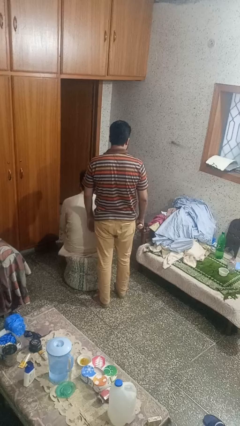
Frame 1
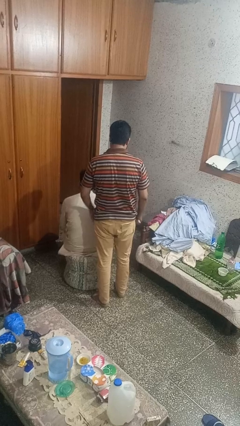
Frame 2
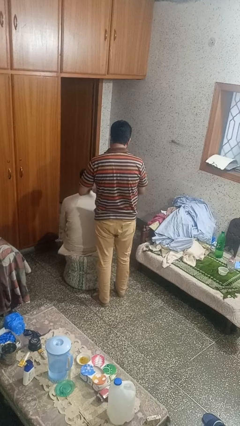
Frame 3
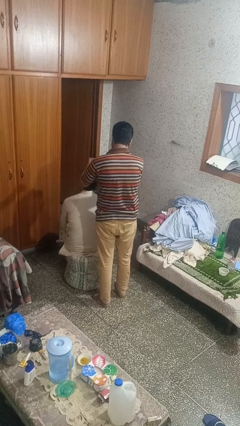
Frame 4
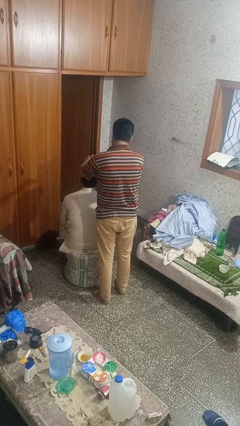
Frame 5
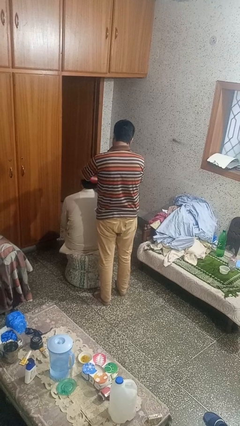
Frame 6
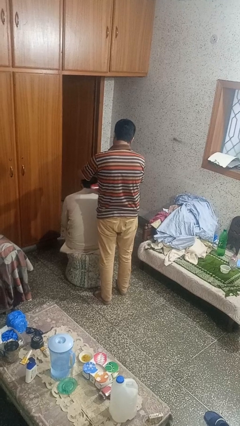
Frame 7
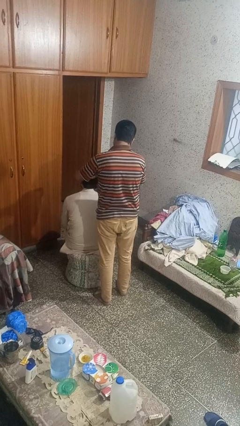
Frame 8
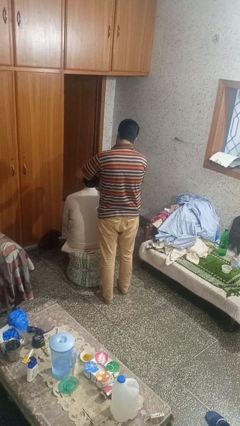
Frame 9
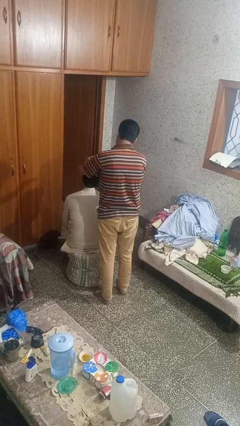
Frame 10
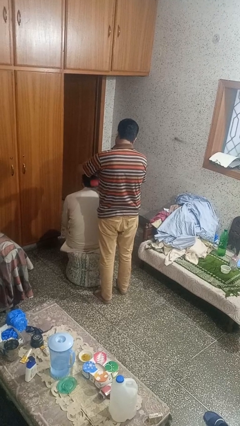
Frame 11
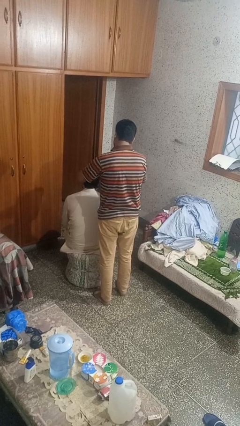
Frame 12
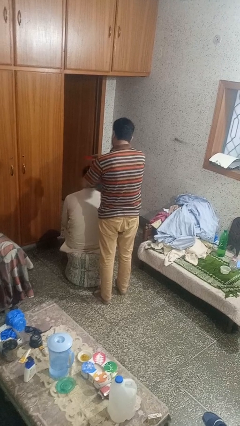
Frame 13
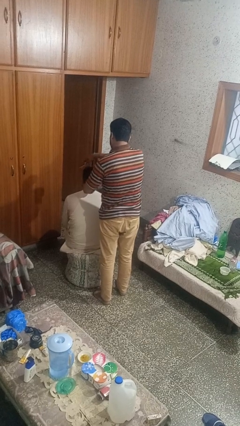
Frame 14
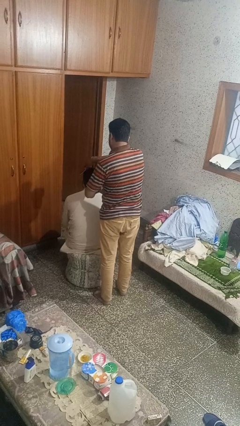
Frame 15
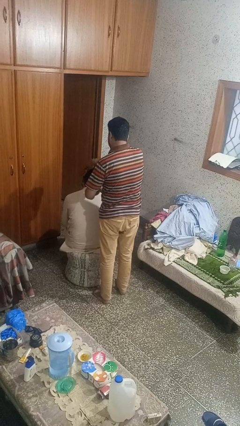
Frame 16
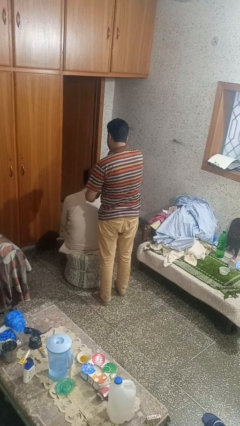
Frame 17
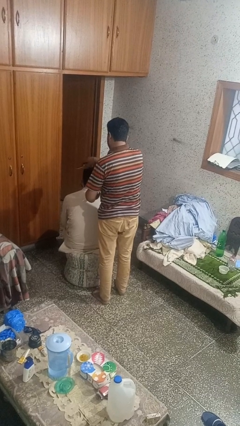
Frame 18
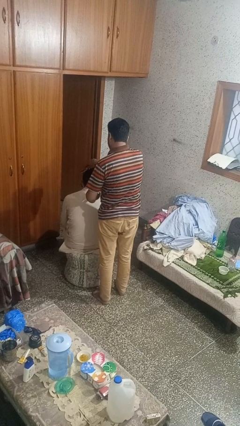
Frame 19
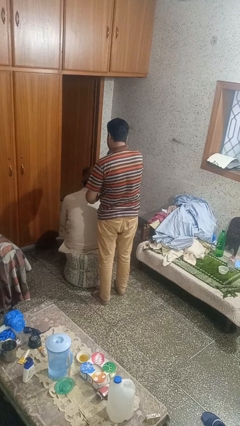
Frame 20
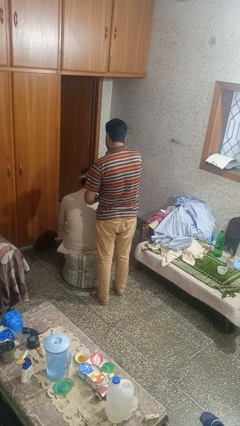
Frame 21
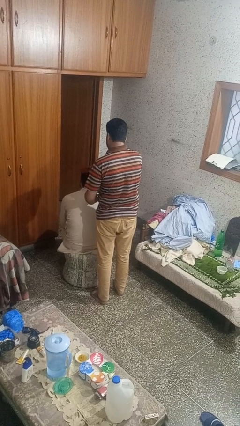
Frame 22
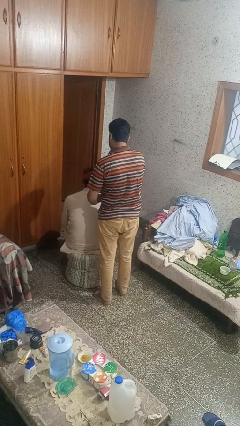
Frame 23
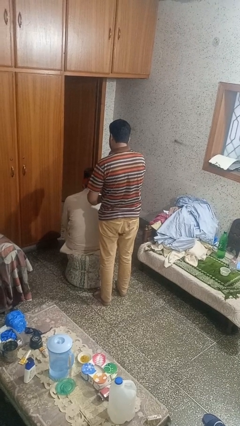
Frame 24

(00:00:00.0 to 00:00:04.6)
person brushes hair of person

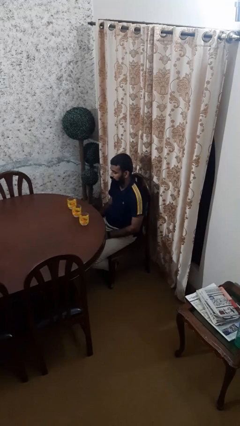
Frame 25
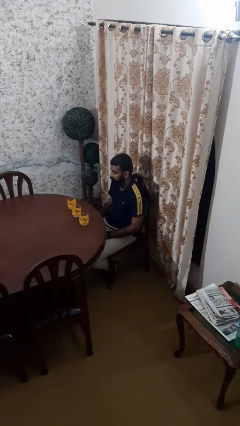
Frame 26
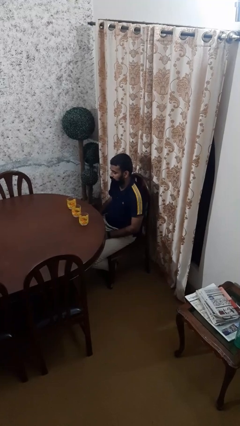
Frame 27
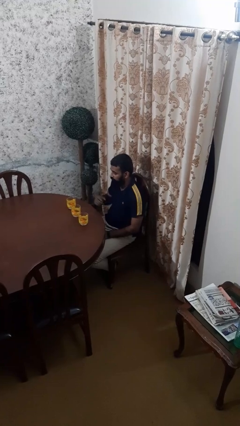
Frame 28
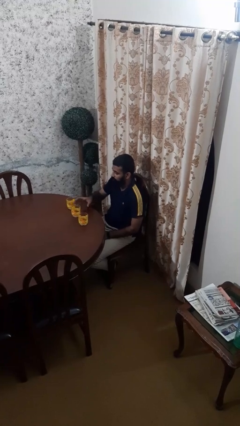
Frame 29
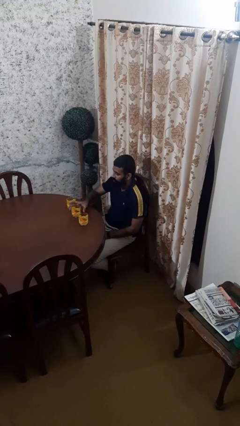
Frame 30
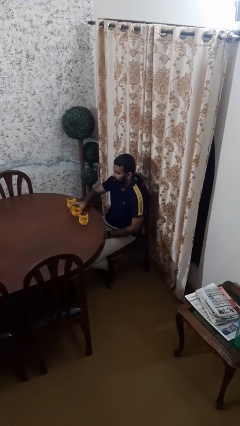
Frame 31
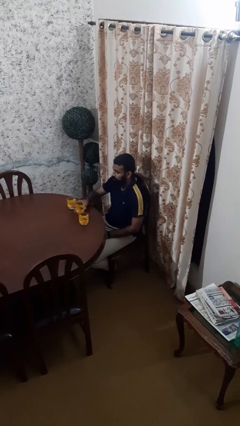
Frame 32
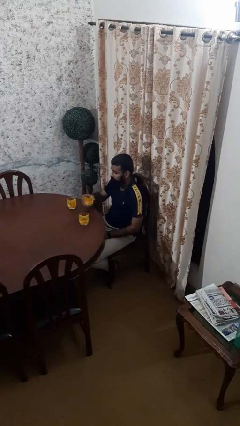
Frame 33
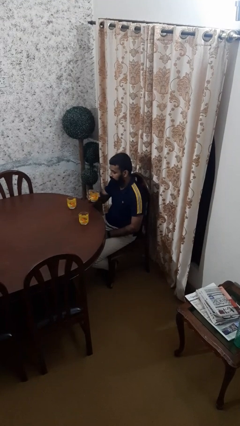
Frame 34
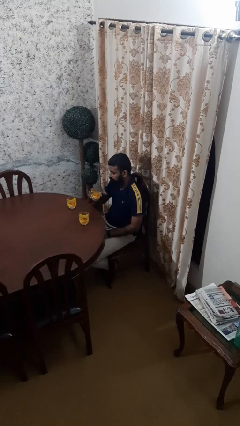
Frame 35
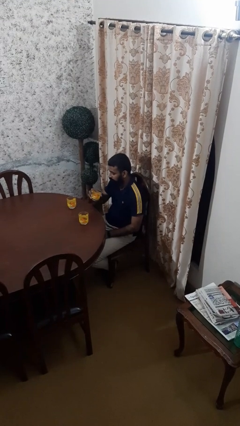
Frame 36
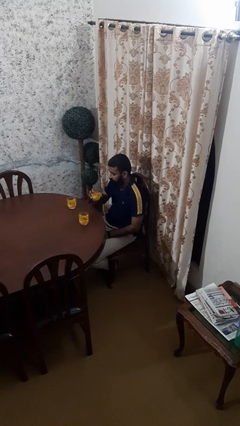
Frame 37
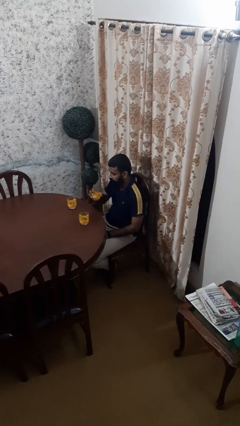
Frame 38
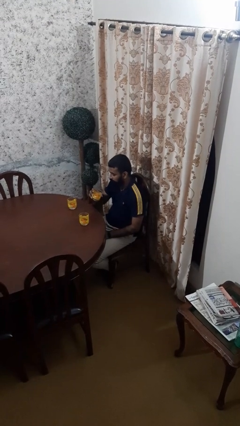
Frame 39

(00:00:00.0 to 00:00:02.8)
person picks up object from table

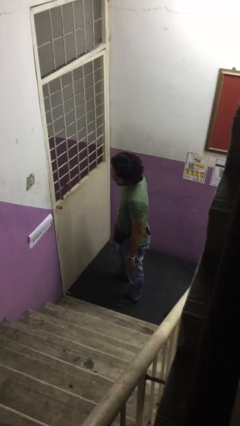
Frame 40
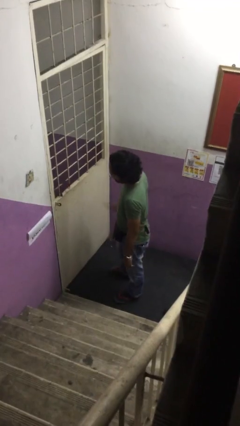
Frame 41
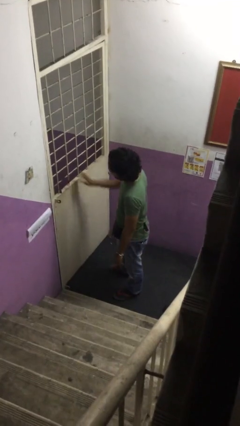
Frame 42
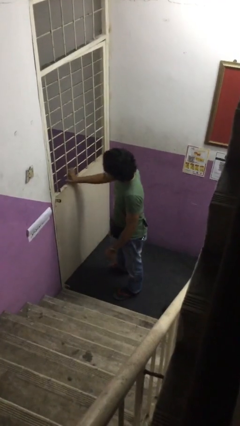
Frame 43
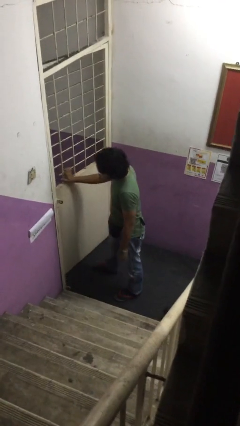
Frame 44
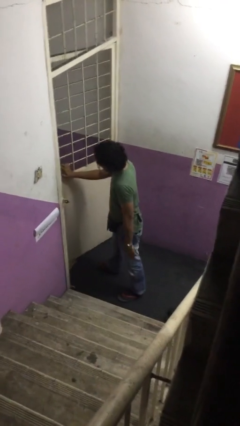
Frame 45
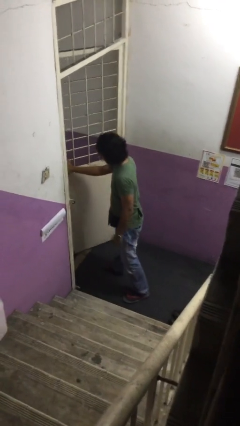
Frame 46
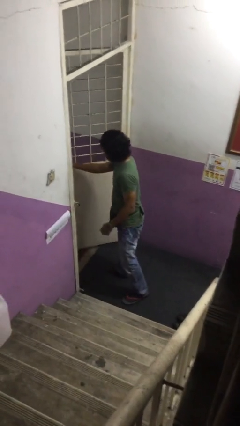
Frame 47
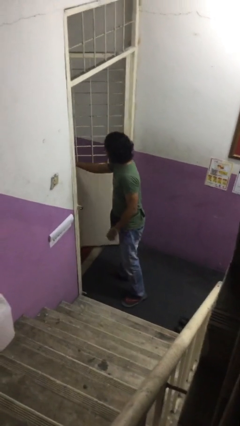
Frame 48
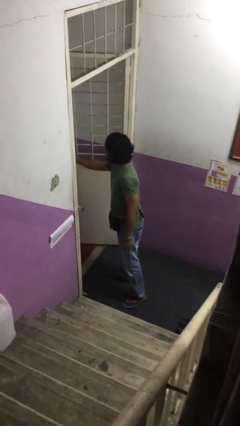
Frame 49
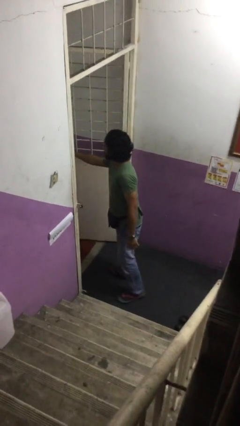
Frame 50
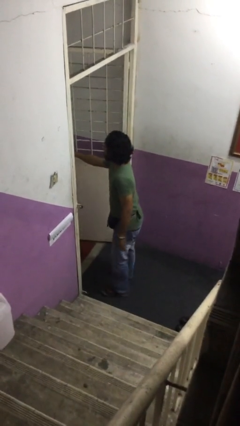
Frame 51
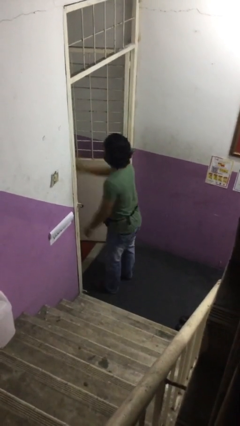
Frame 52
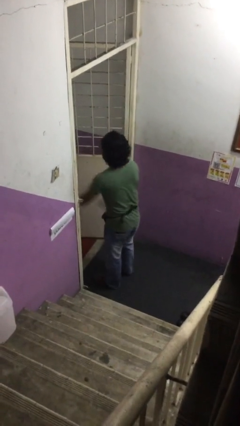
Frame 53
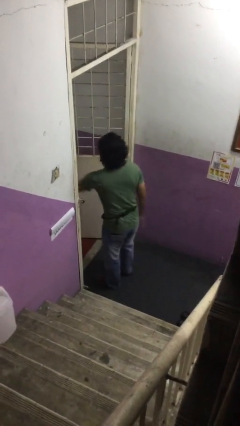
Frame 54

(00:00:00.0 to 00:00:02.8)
person opens facility door

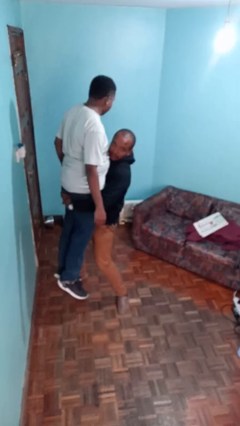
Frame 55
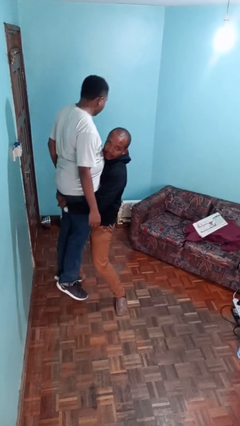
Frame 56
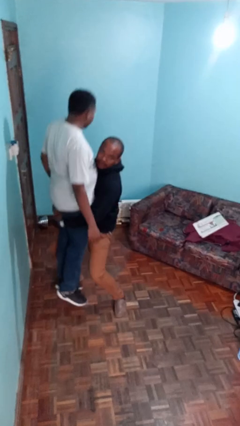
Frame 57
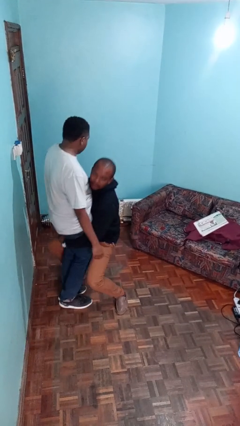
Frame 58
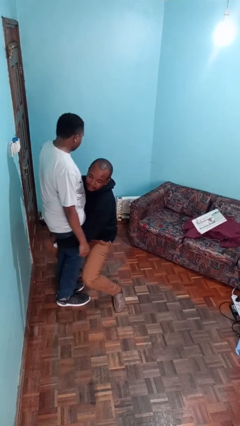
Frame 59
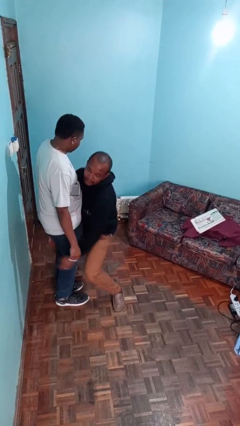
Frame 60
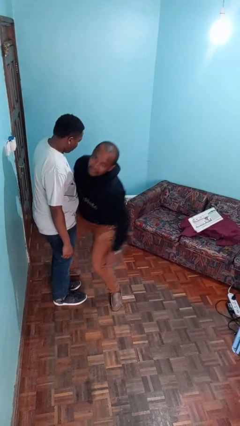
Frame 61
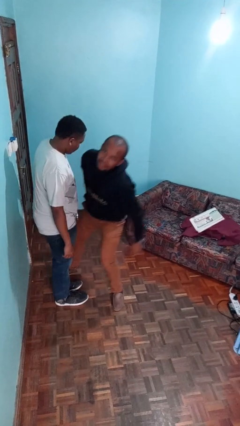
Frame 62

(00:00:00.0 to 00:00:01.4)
person puts down person

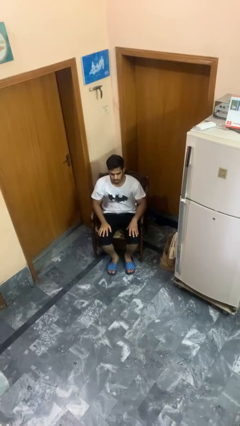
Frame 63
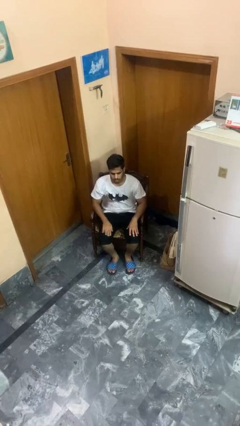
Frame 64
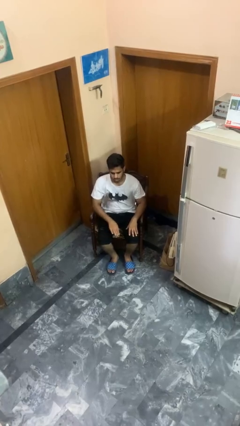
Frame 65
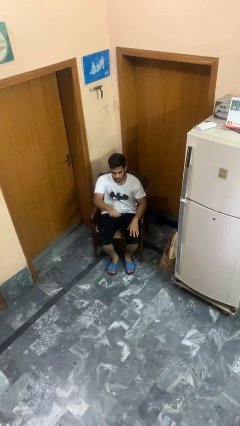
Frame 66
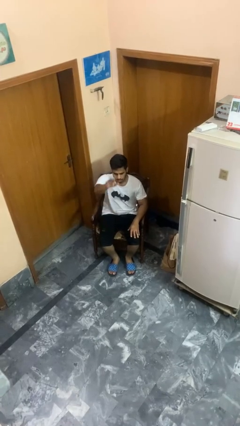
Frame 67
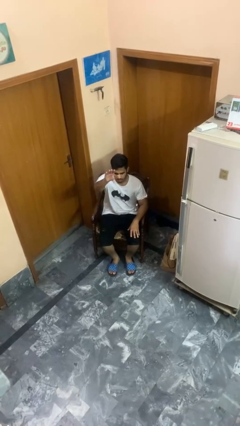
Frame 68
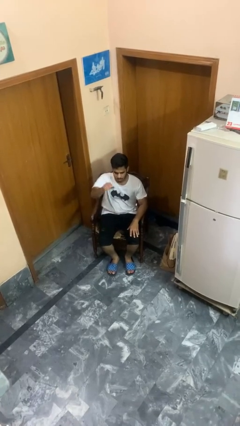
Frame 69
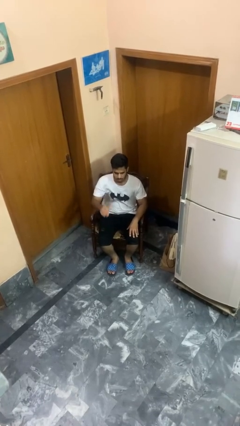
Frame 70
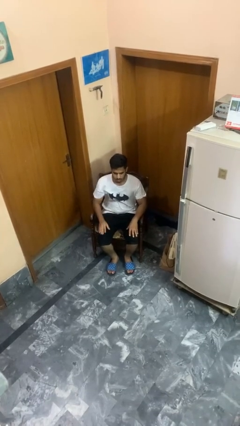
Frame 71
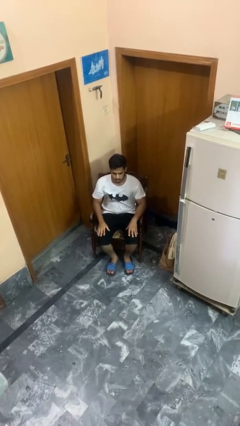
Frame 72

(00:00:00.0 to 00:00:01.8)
person gestures swipe up

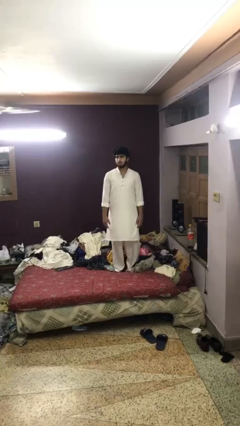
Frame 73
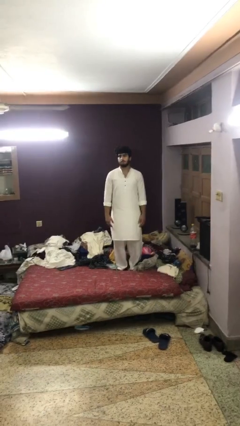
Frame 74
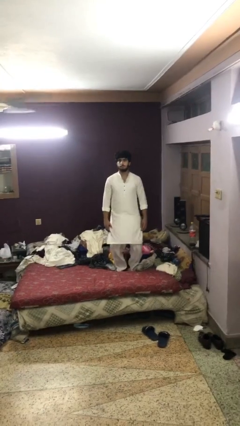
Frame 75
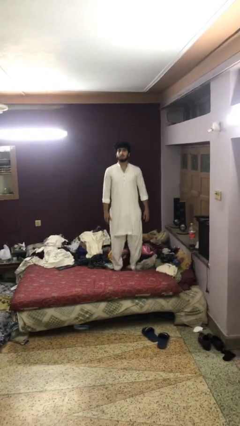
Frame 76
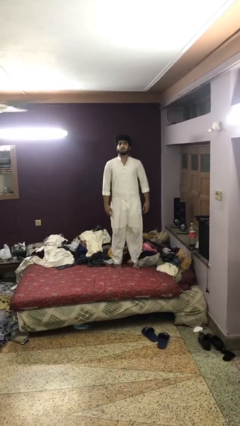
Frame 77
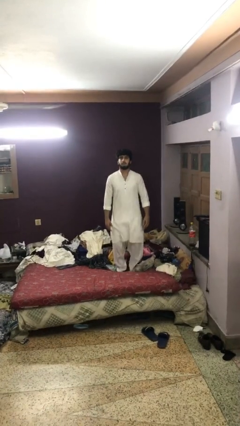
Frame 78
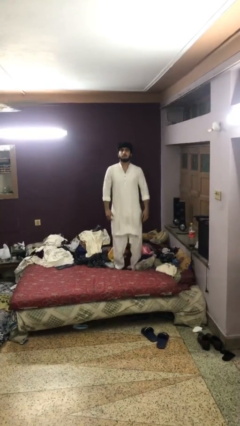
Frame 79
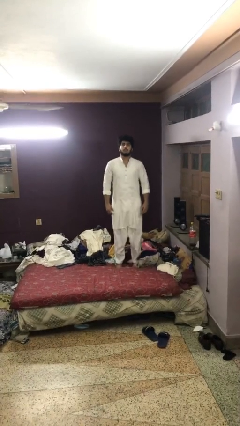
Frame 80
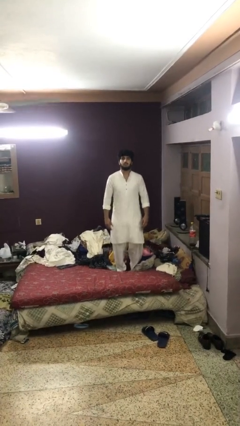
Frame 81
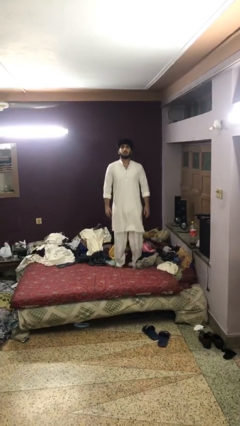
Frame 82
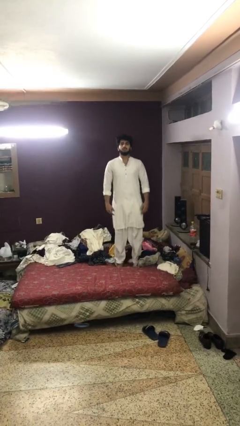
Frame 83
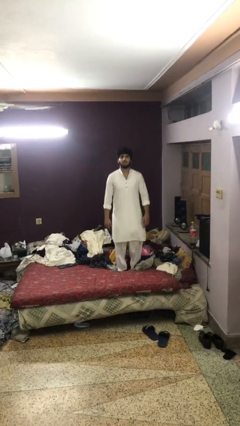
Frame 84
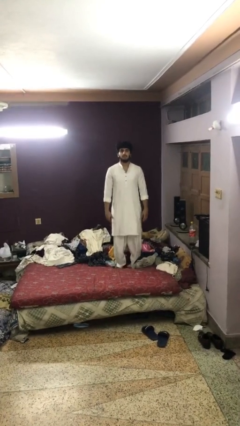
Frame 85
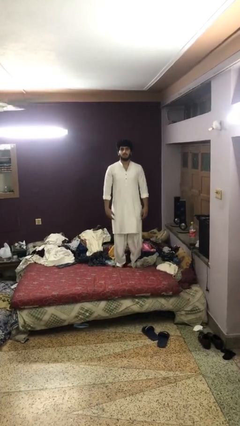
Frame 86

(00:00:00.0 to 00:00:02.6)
person jumps on bed

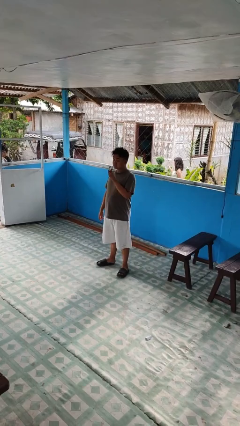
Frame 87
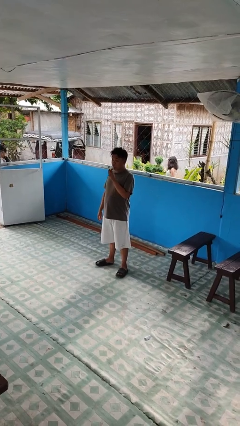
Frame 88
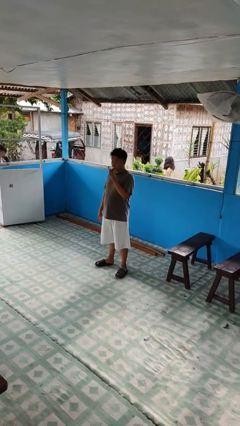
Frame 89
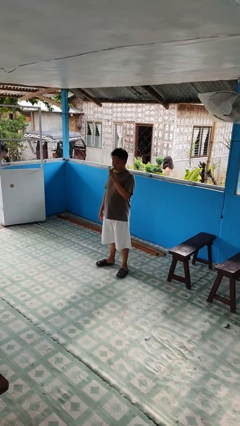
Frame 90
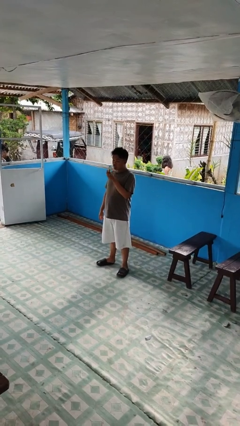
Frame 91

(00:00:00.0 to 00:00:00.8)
person eats banana

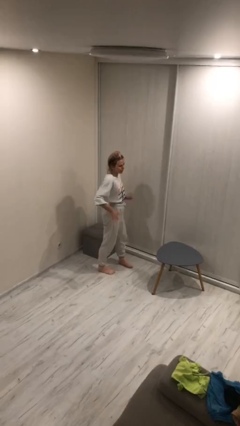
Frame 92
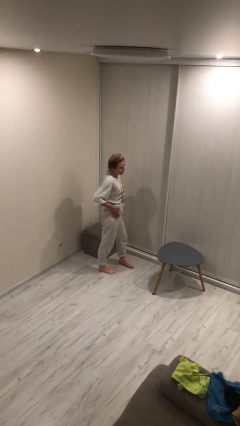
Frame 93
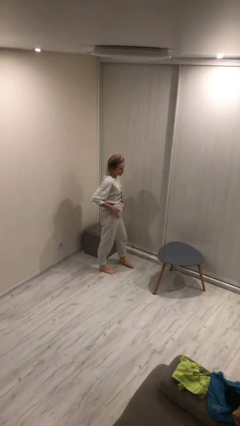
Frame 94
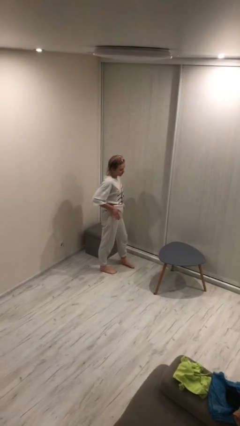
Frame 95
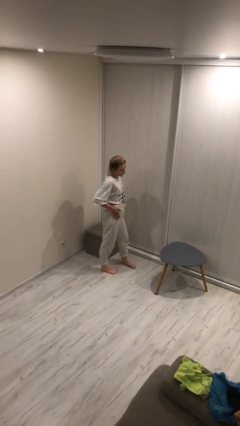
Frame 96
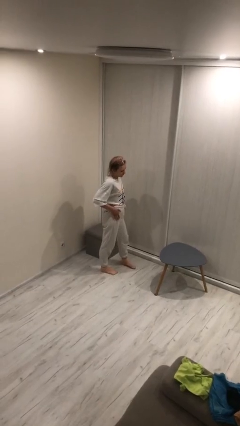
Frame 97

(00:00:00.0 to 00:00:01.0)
person slaps hands on thighs
